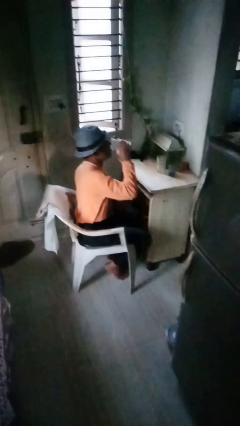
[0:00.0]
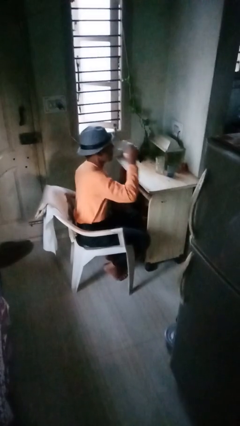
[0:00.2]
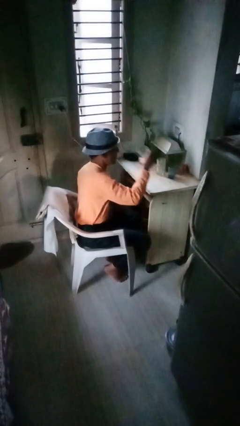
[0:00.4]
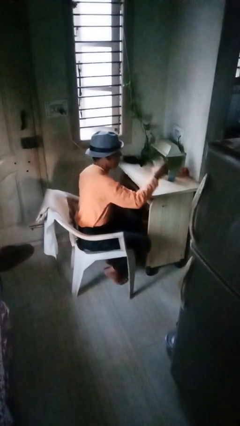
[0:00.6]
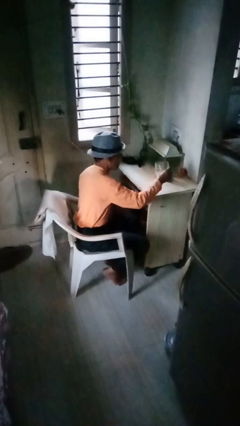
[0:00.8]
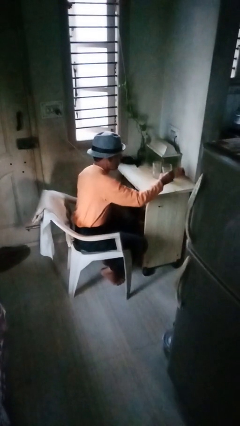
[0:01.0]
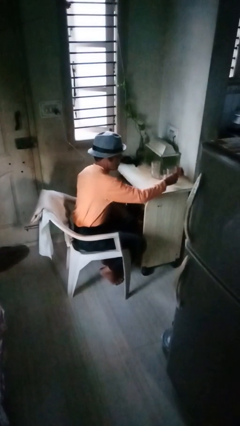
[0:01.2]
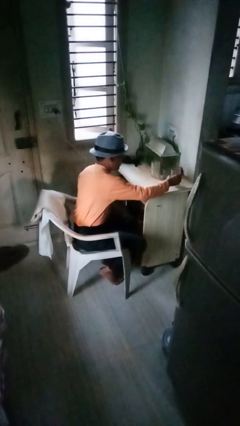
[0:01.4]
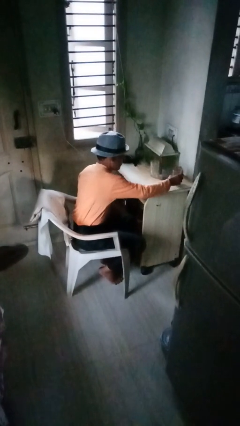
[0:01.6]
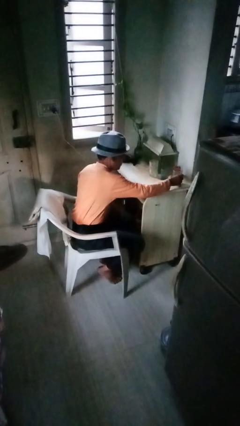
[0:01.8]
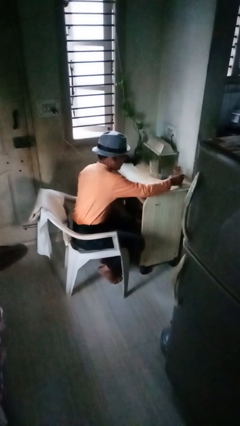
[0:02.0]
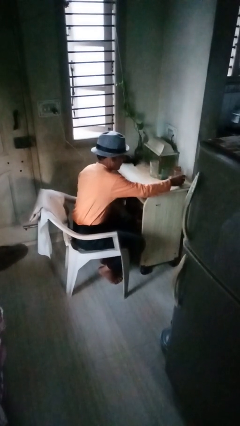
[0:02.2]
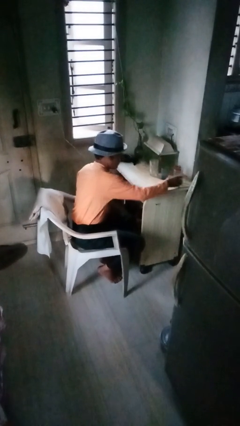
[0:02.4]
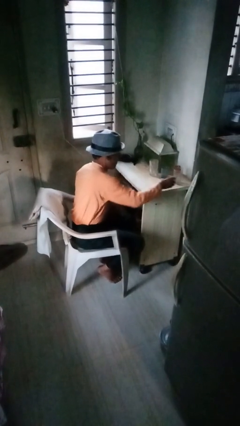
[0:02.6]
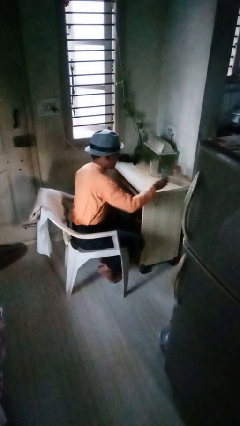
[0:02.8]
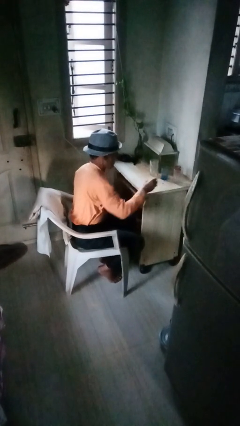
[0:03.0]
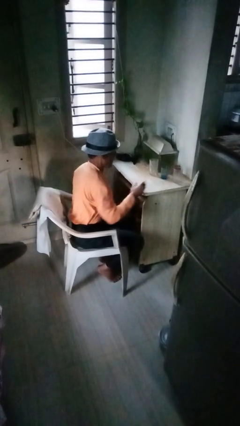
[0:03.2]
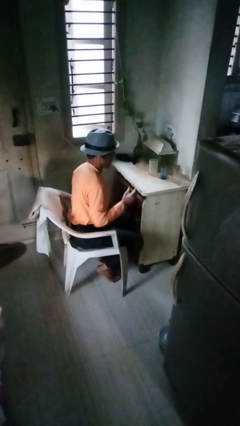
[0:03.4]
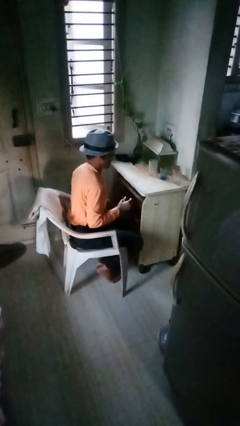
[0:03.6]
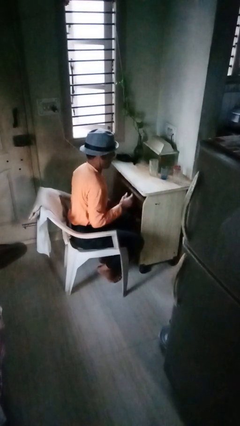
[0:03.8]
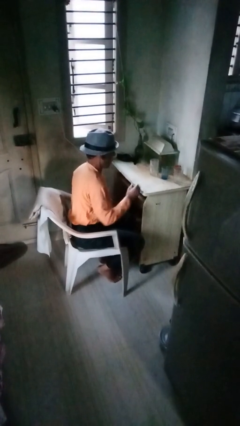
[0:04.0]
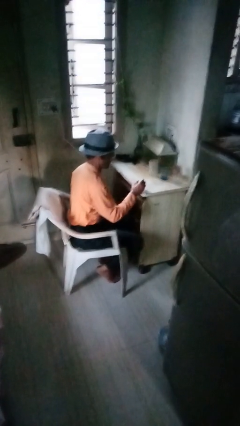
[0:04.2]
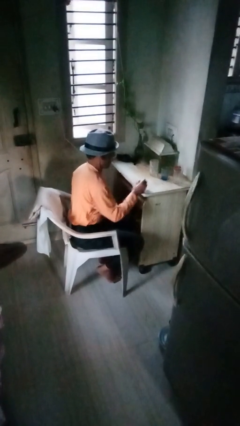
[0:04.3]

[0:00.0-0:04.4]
person puts down object on table

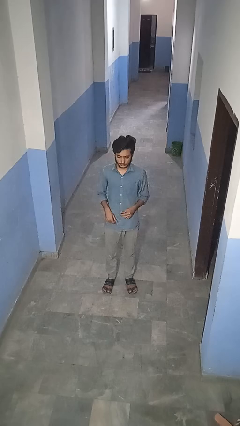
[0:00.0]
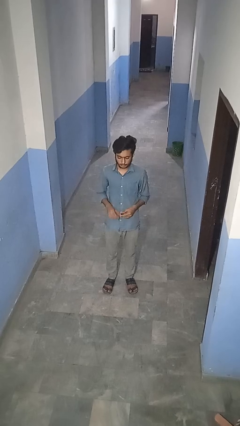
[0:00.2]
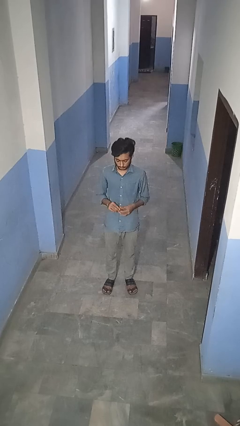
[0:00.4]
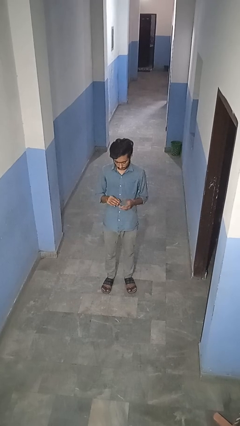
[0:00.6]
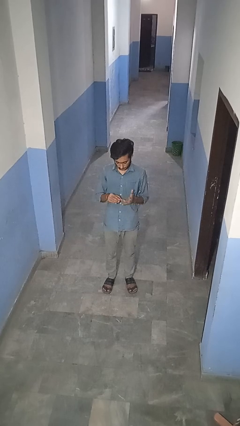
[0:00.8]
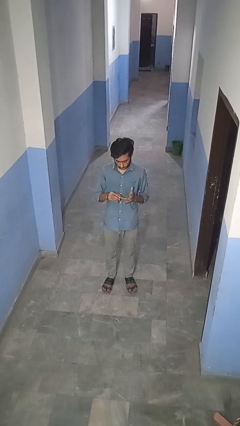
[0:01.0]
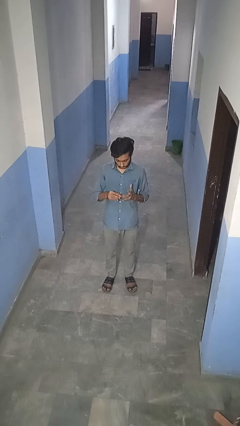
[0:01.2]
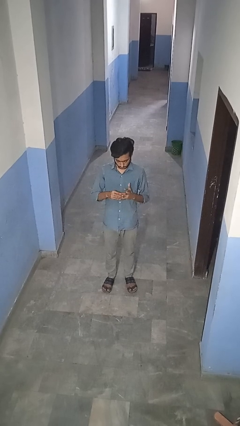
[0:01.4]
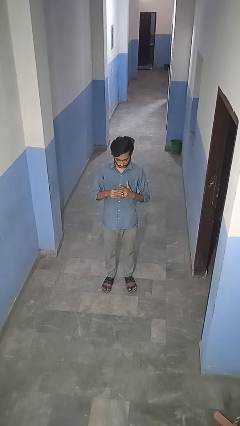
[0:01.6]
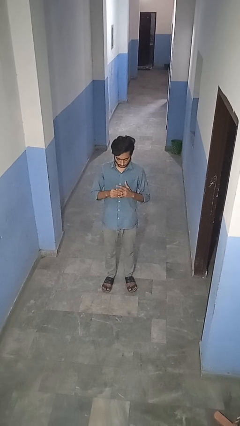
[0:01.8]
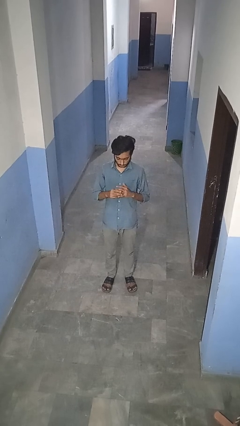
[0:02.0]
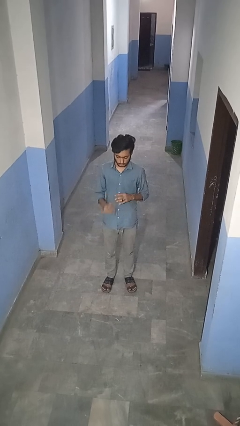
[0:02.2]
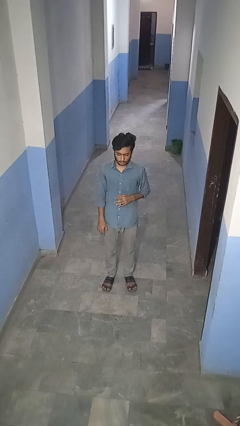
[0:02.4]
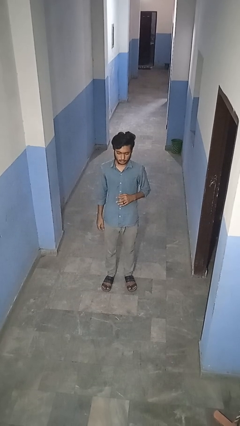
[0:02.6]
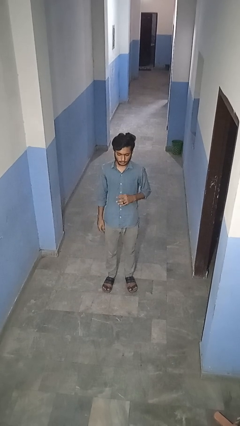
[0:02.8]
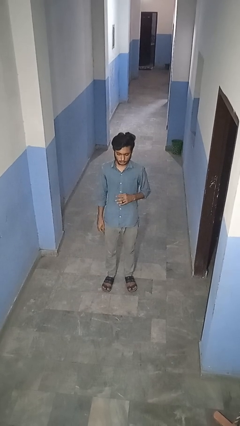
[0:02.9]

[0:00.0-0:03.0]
person puts on ring

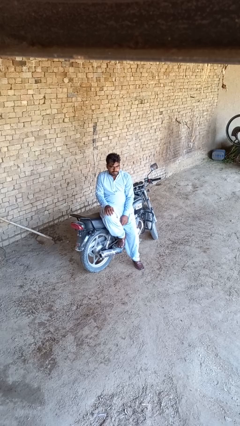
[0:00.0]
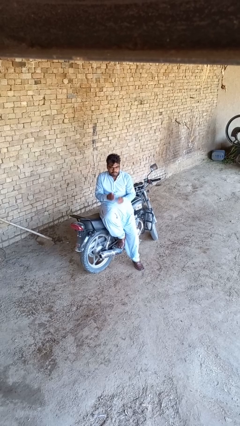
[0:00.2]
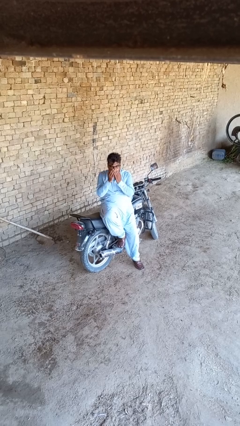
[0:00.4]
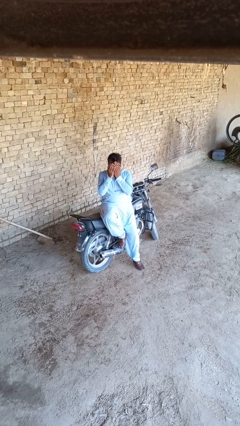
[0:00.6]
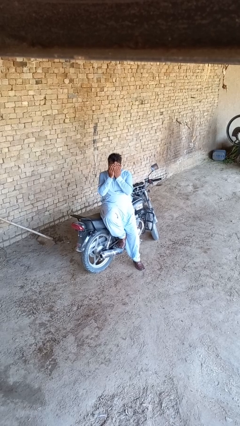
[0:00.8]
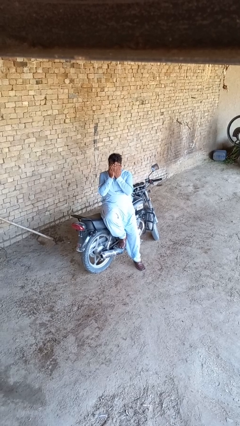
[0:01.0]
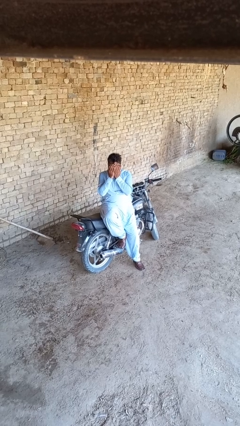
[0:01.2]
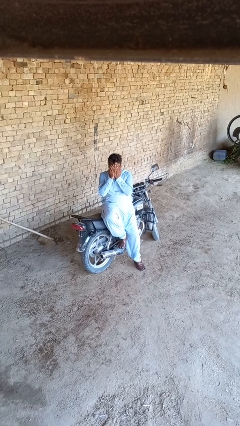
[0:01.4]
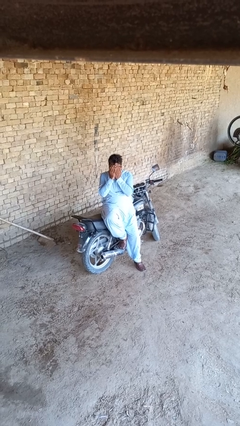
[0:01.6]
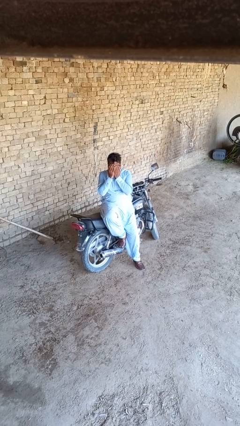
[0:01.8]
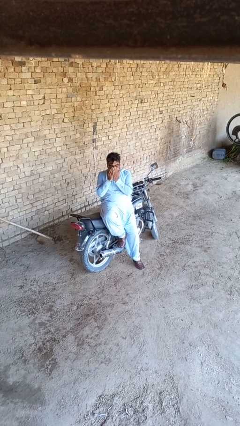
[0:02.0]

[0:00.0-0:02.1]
person covers face with hands

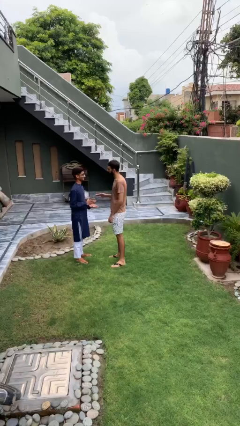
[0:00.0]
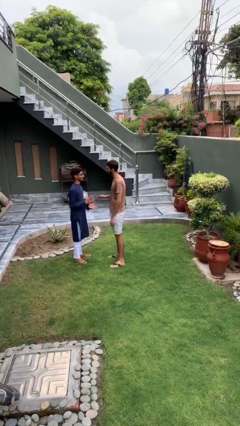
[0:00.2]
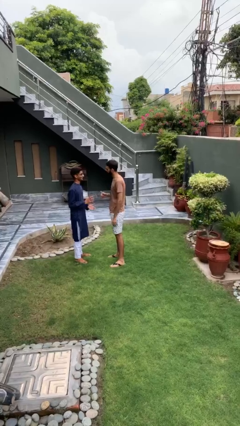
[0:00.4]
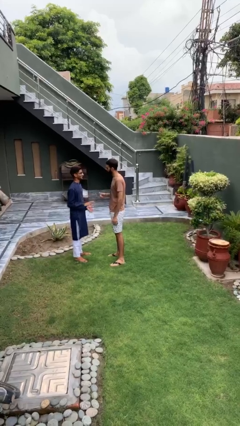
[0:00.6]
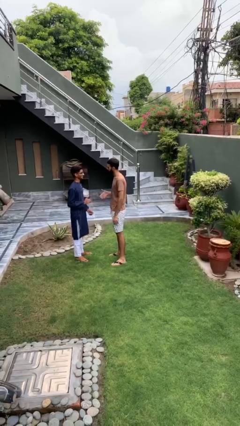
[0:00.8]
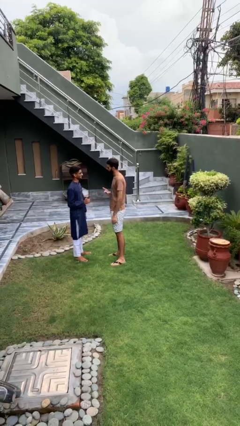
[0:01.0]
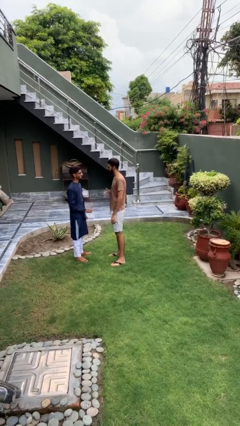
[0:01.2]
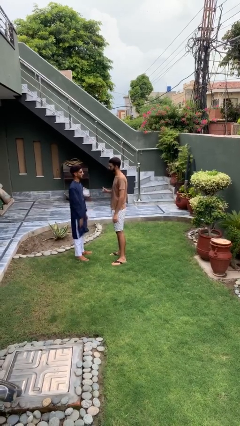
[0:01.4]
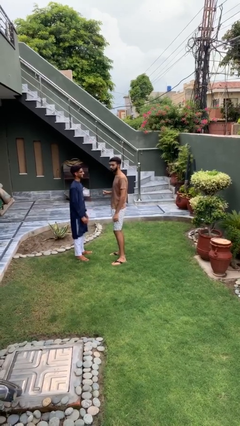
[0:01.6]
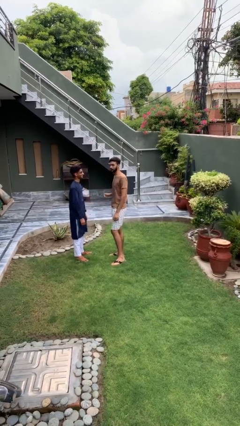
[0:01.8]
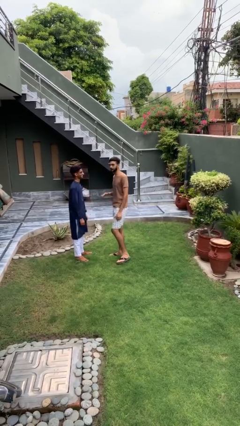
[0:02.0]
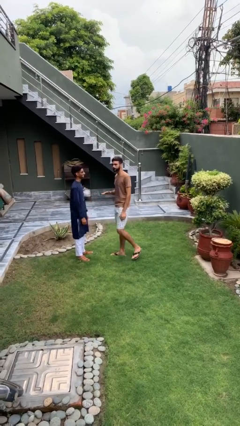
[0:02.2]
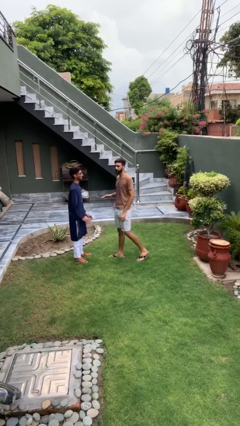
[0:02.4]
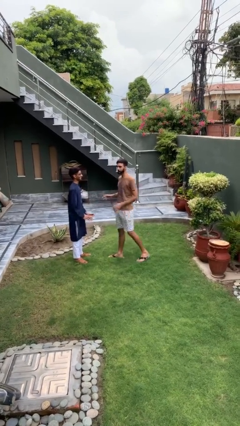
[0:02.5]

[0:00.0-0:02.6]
person talks to person

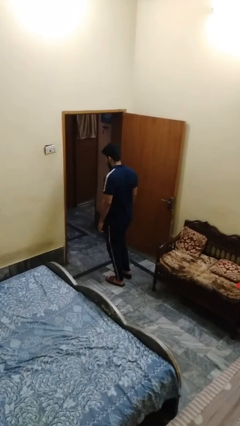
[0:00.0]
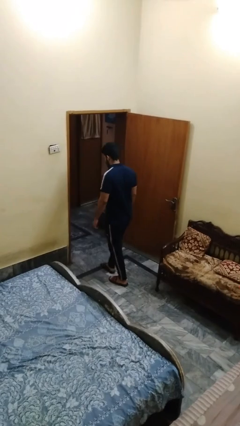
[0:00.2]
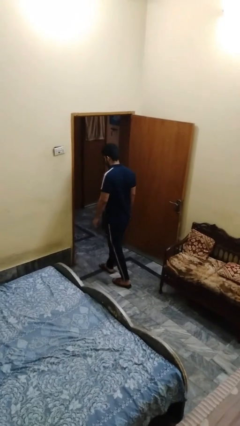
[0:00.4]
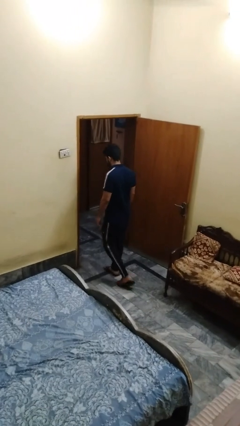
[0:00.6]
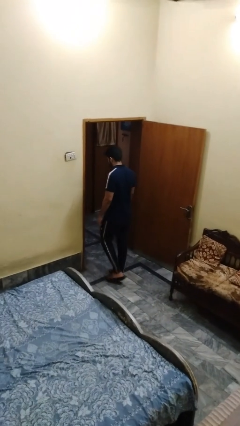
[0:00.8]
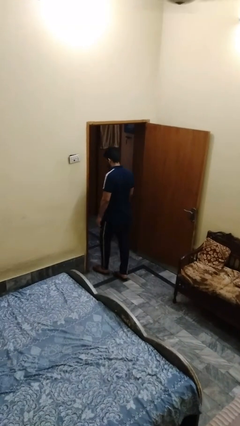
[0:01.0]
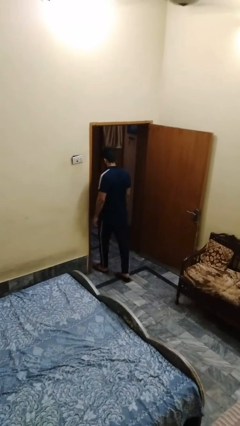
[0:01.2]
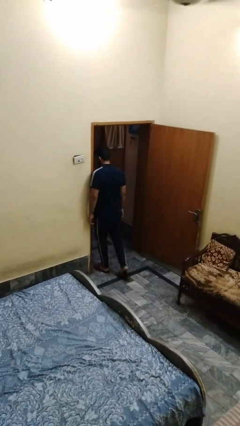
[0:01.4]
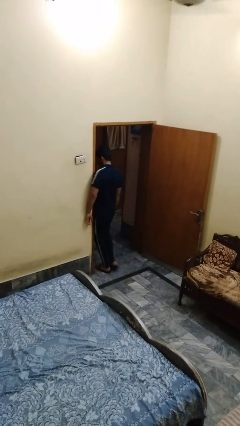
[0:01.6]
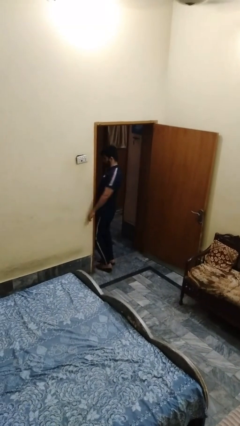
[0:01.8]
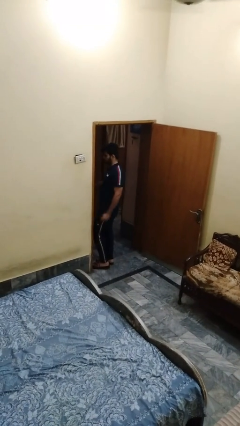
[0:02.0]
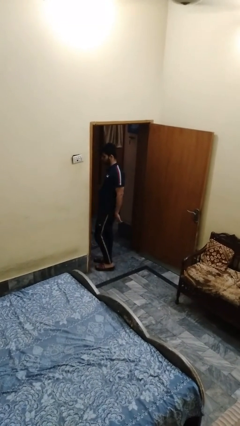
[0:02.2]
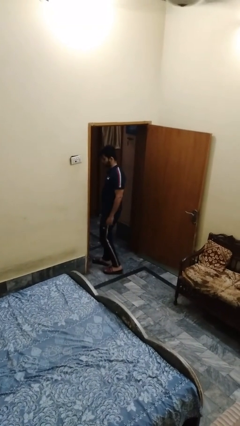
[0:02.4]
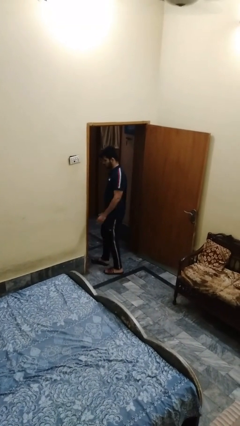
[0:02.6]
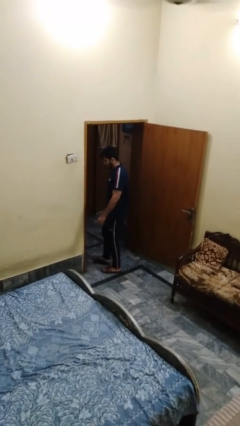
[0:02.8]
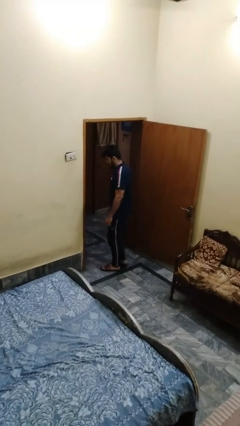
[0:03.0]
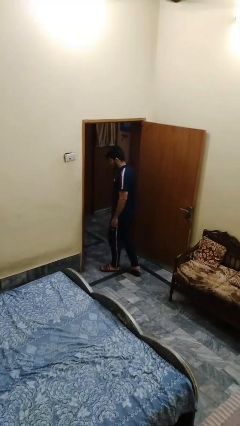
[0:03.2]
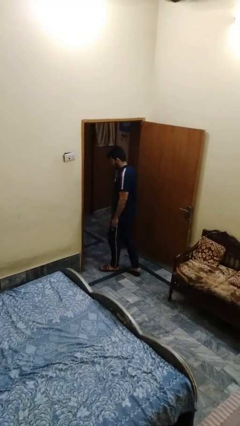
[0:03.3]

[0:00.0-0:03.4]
person bumps into wall

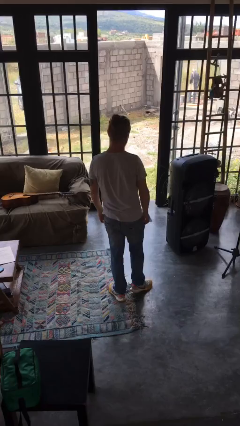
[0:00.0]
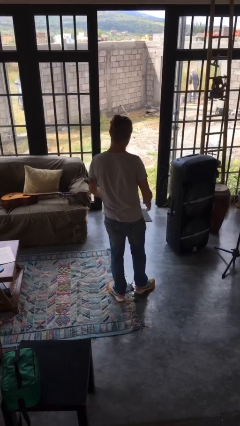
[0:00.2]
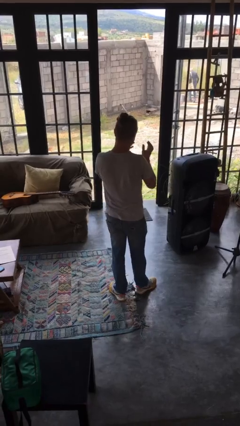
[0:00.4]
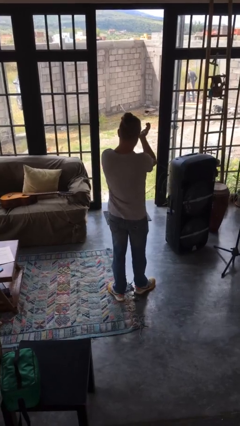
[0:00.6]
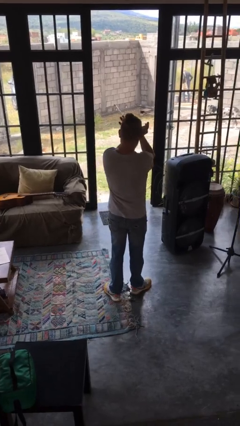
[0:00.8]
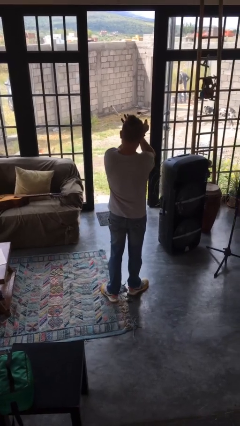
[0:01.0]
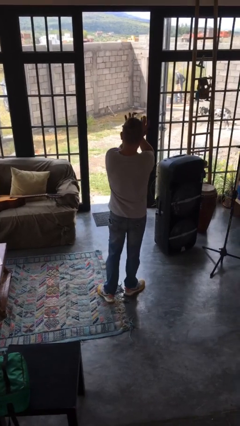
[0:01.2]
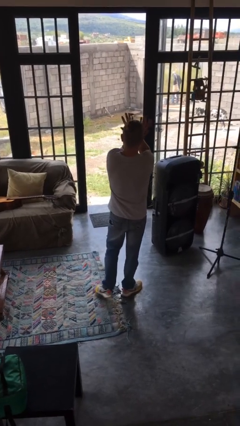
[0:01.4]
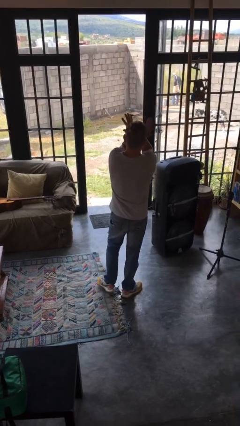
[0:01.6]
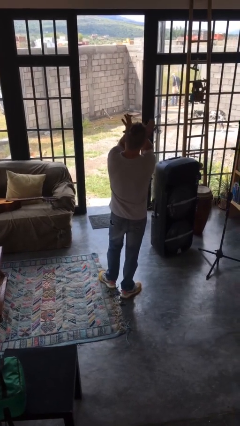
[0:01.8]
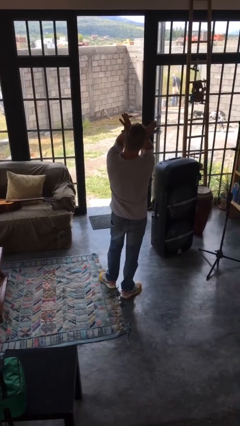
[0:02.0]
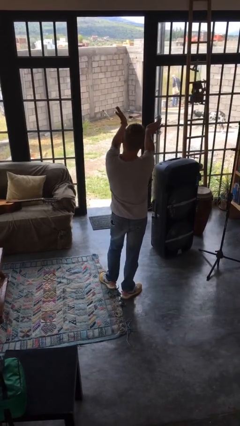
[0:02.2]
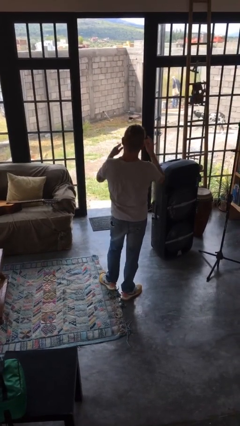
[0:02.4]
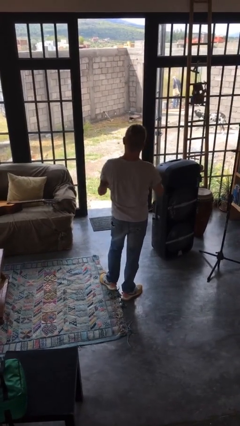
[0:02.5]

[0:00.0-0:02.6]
person rubs eyes
